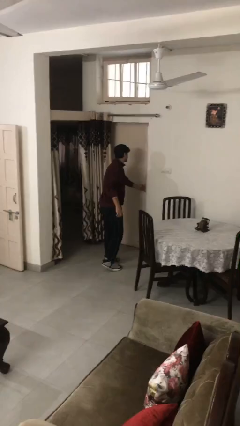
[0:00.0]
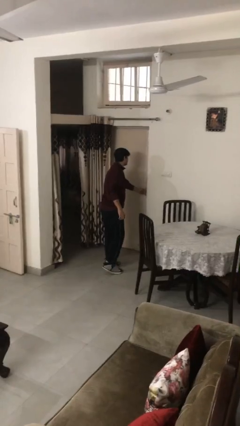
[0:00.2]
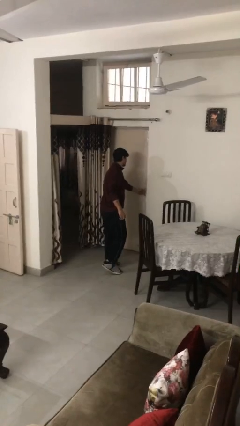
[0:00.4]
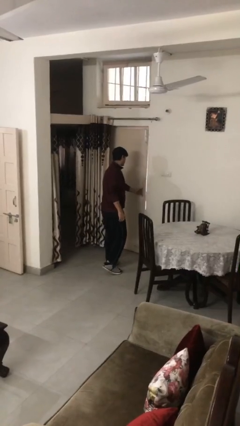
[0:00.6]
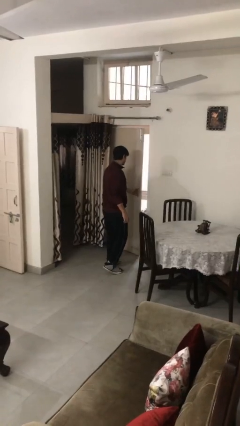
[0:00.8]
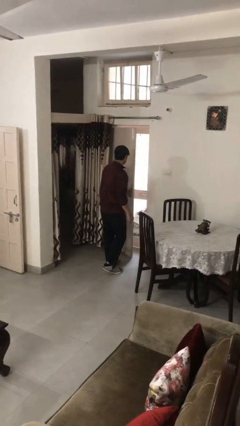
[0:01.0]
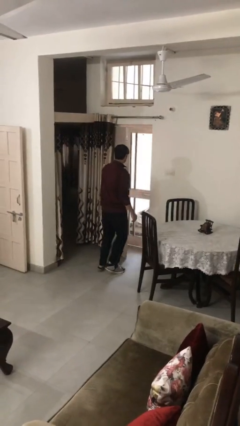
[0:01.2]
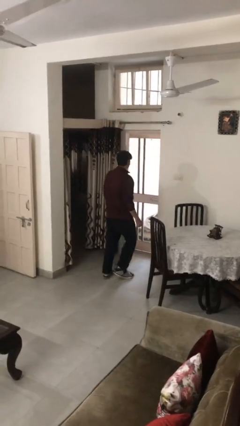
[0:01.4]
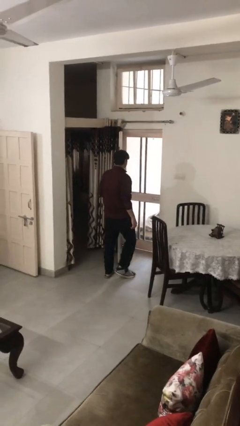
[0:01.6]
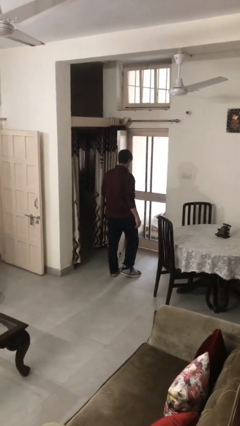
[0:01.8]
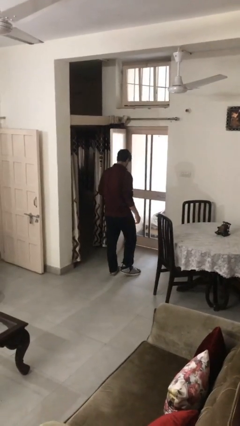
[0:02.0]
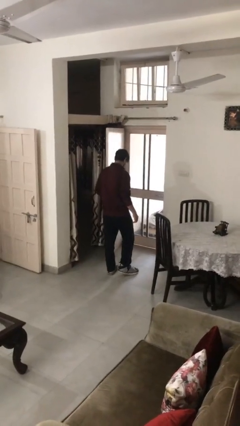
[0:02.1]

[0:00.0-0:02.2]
person opens facility door

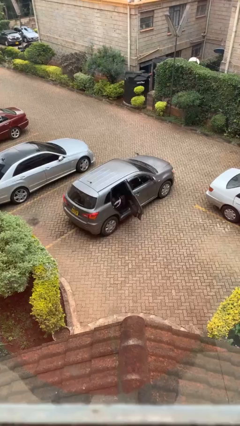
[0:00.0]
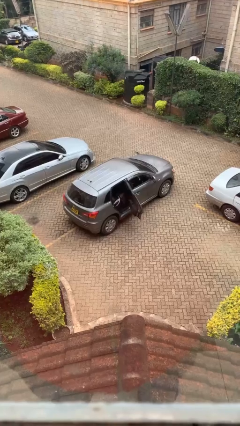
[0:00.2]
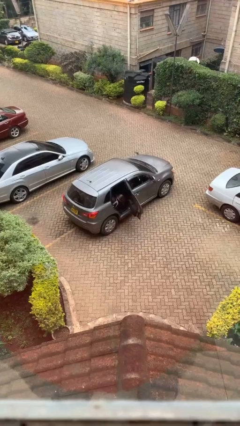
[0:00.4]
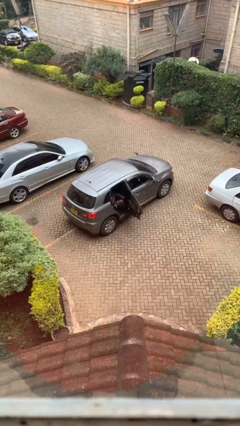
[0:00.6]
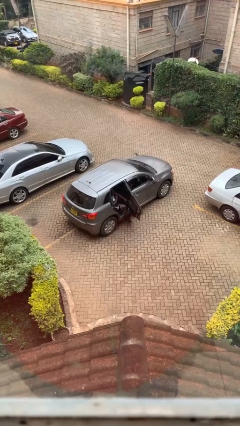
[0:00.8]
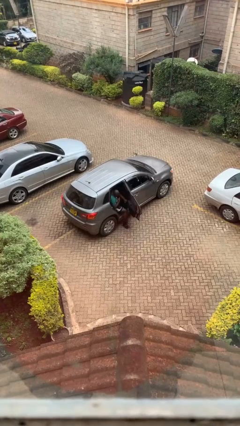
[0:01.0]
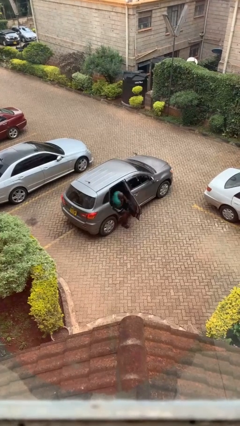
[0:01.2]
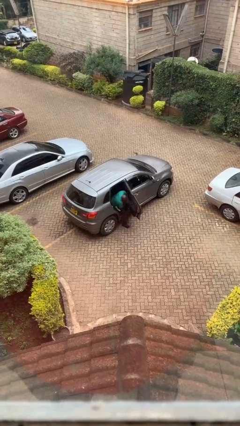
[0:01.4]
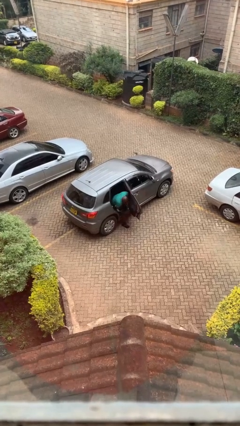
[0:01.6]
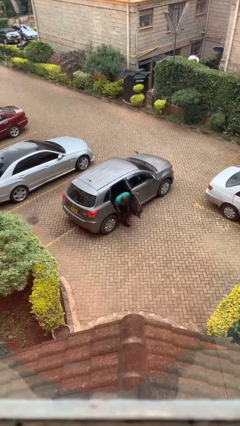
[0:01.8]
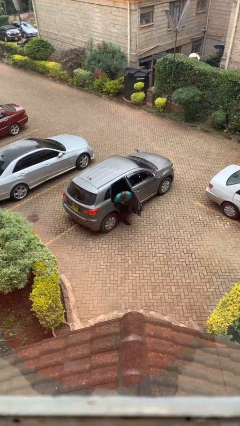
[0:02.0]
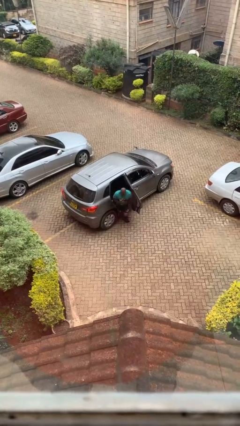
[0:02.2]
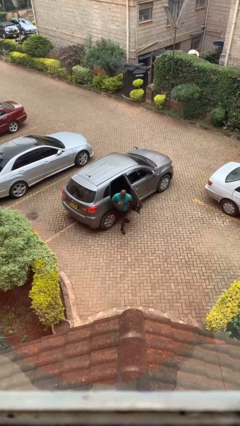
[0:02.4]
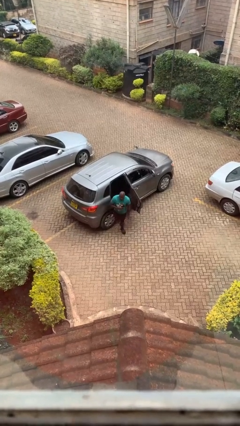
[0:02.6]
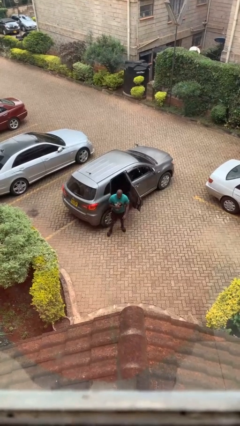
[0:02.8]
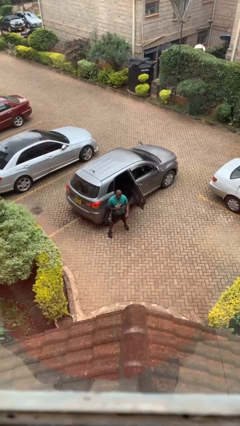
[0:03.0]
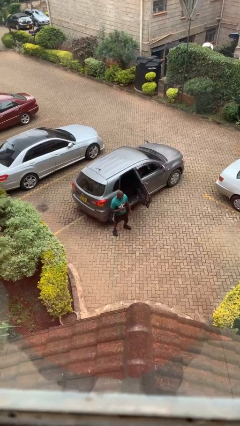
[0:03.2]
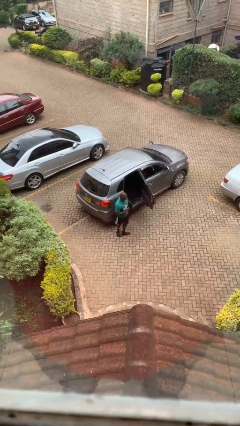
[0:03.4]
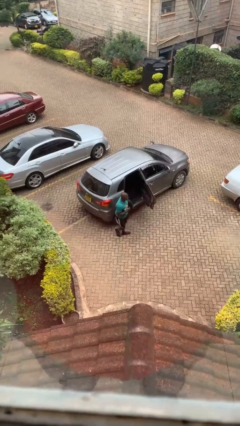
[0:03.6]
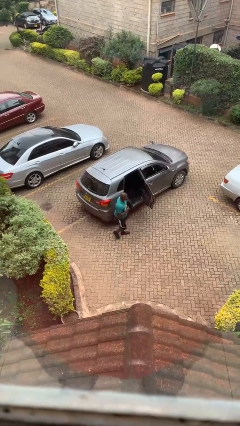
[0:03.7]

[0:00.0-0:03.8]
person exits car

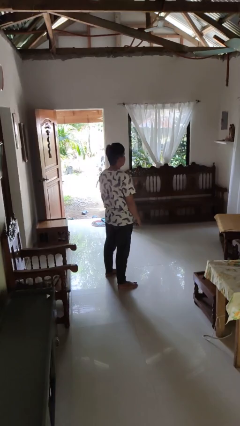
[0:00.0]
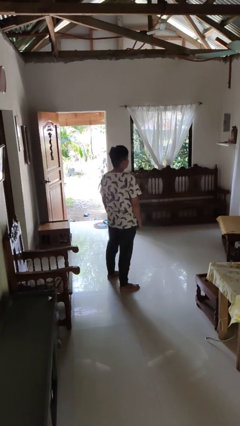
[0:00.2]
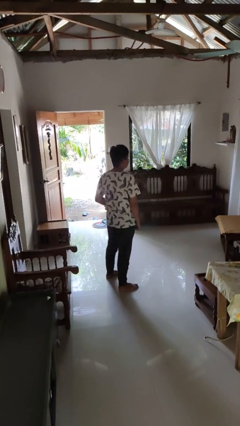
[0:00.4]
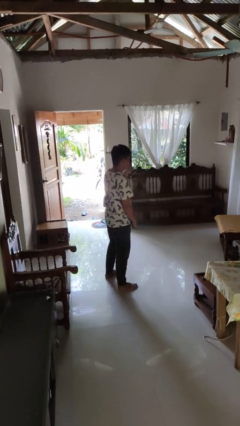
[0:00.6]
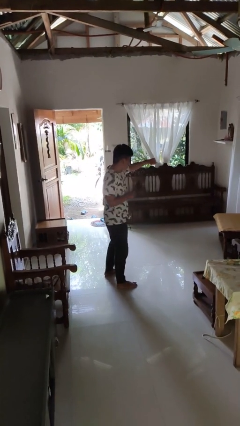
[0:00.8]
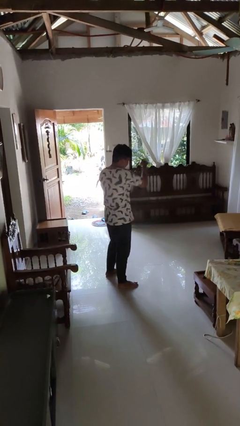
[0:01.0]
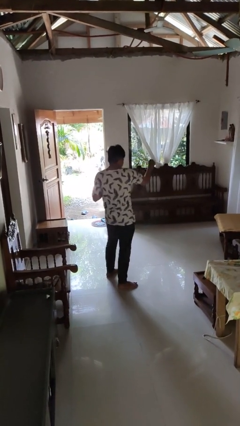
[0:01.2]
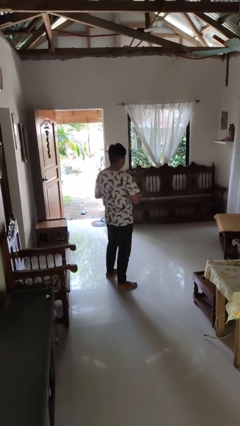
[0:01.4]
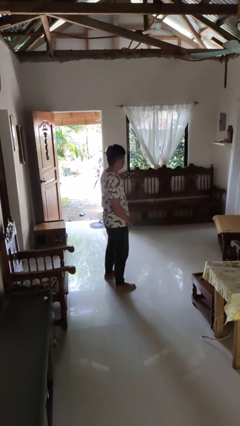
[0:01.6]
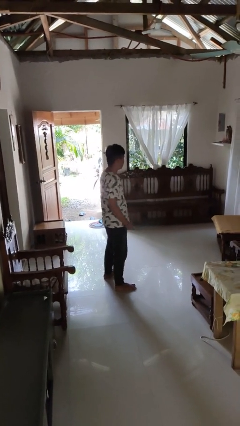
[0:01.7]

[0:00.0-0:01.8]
person punches

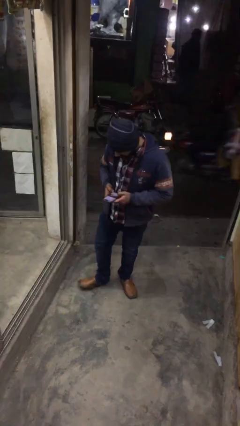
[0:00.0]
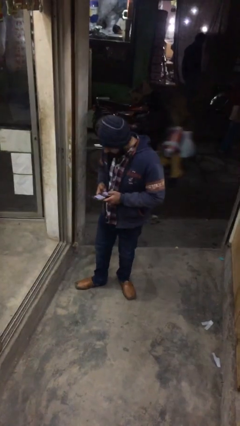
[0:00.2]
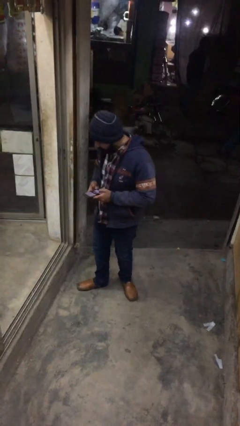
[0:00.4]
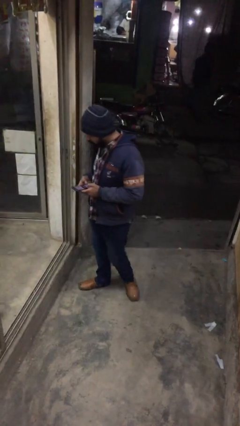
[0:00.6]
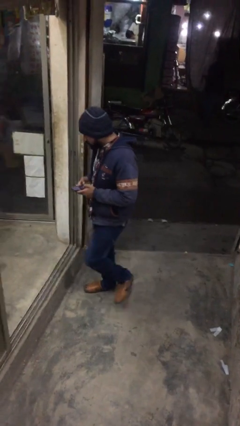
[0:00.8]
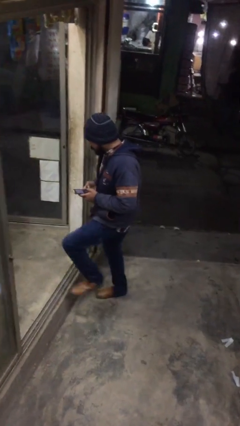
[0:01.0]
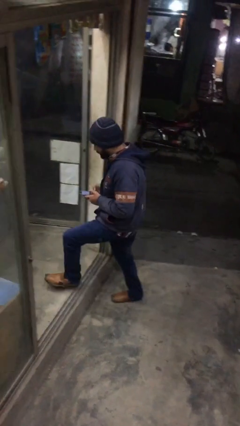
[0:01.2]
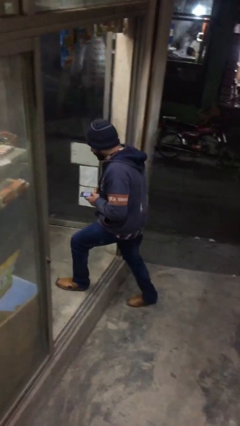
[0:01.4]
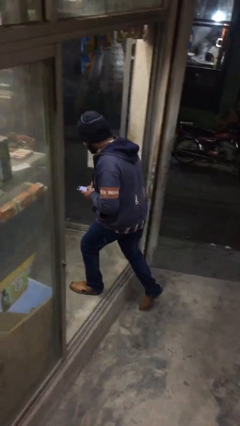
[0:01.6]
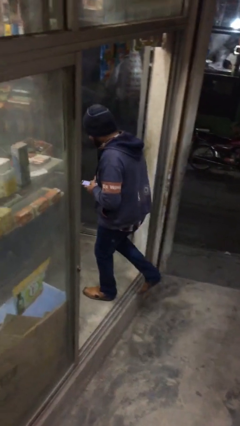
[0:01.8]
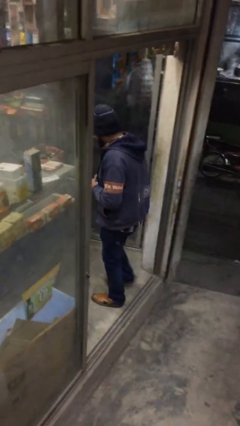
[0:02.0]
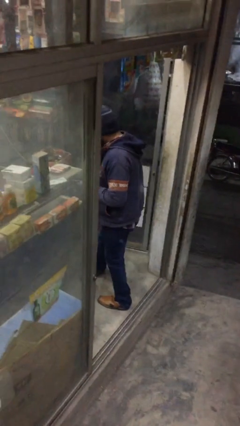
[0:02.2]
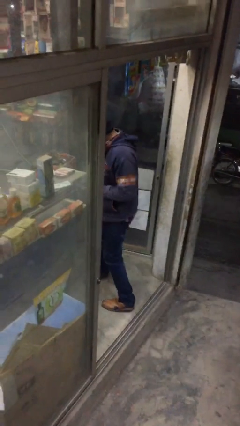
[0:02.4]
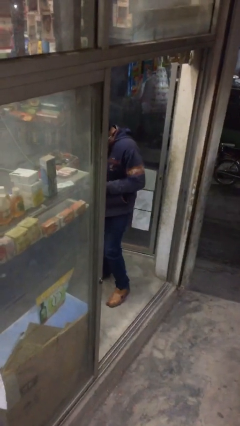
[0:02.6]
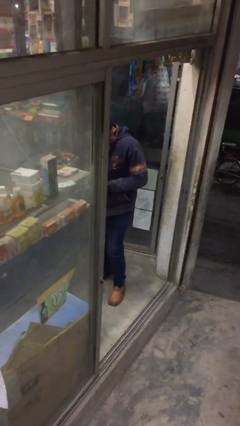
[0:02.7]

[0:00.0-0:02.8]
person enters scene through structure

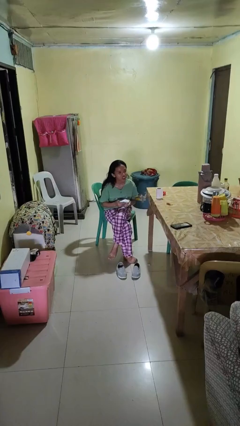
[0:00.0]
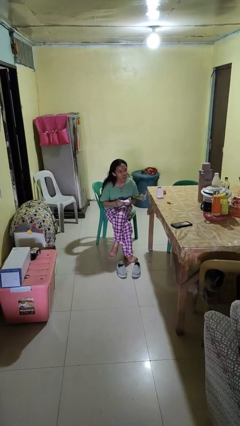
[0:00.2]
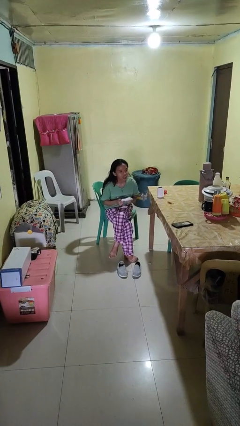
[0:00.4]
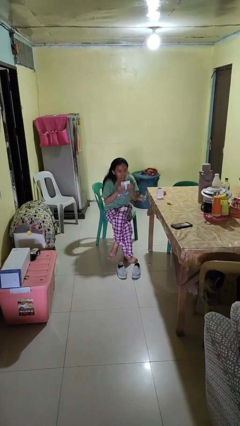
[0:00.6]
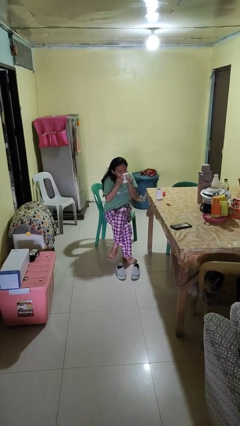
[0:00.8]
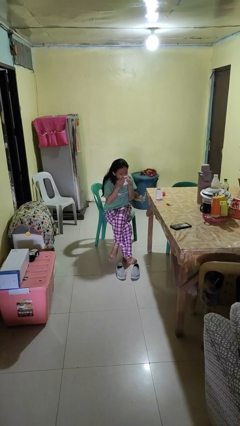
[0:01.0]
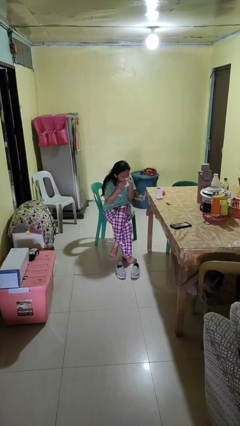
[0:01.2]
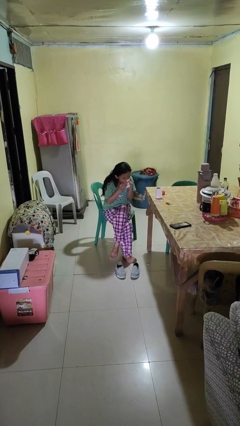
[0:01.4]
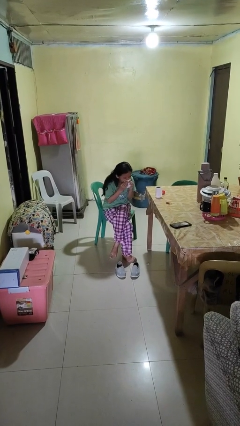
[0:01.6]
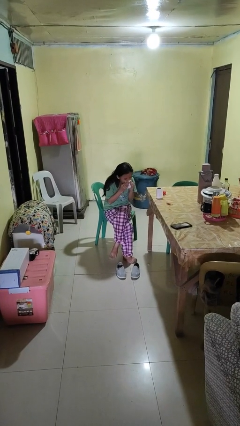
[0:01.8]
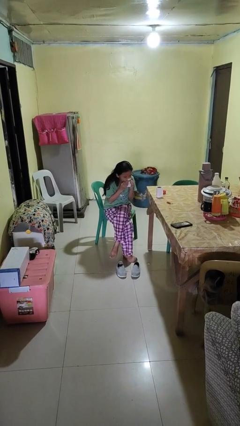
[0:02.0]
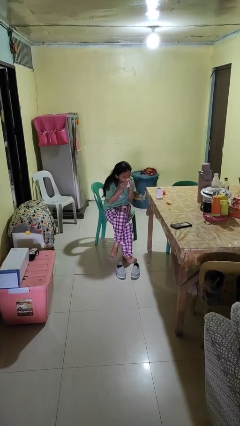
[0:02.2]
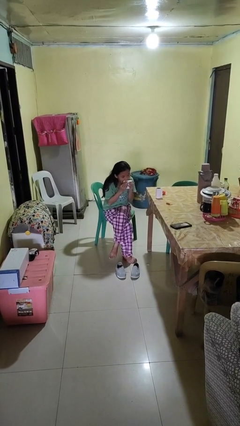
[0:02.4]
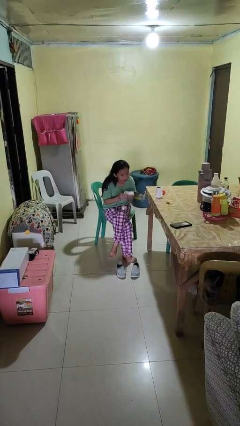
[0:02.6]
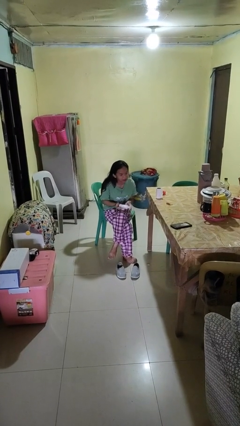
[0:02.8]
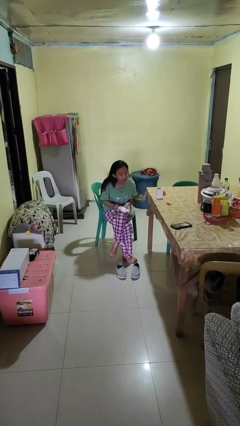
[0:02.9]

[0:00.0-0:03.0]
person blows nose

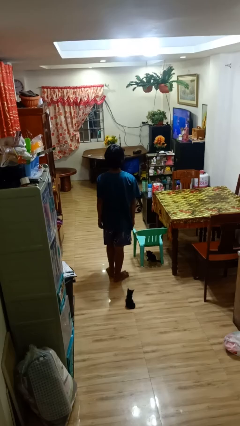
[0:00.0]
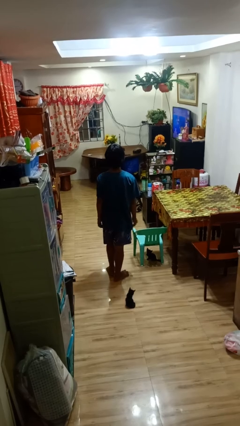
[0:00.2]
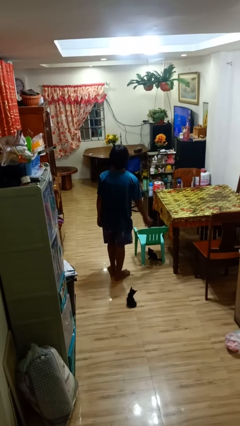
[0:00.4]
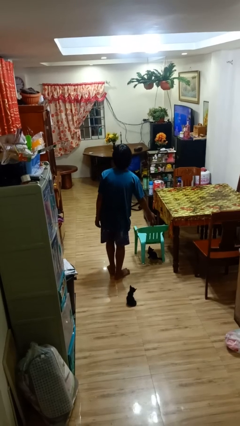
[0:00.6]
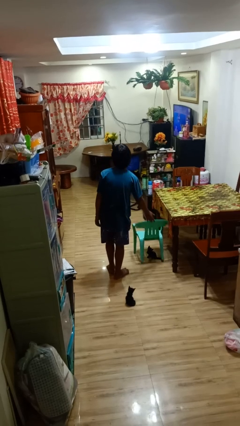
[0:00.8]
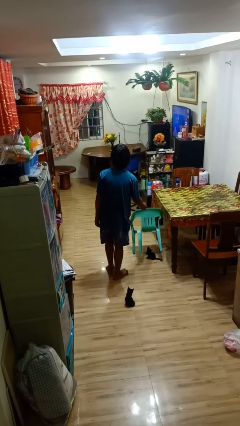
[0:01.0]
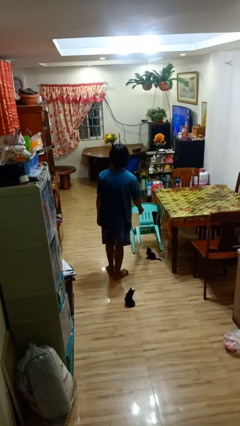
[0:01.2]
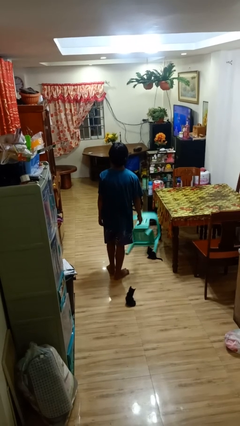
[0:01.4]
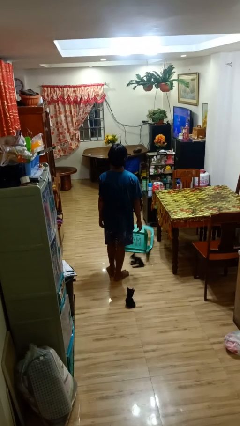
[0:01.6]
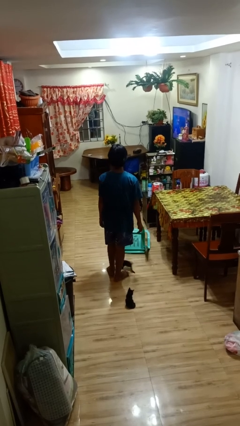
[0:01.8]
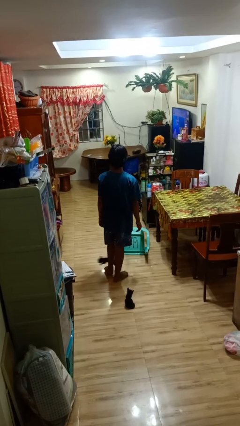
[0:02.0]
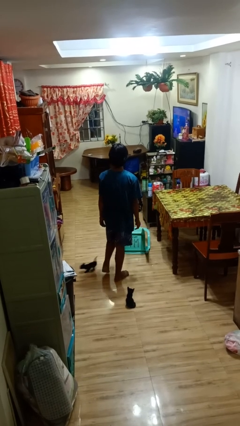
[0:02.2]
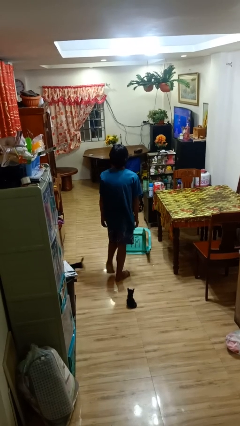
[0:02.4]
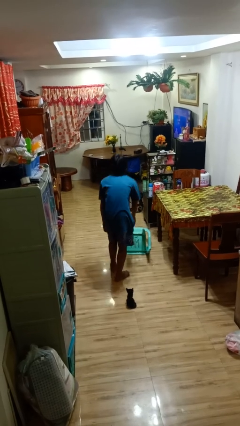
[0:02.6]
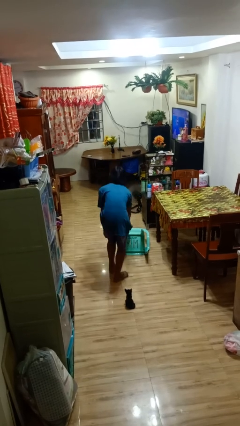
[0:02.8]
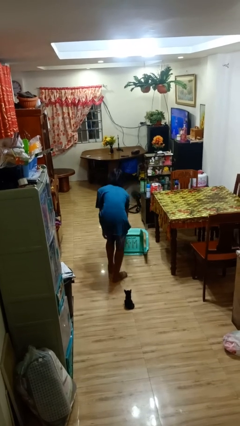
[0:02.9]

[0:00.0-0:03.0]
person knocks over furniture

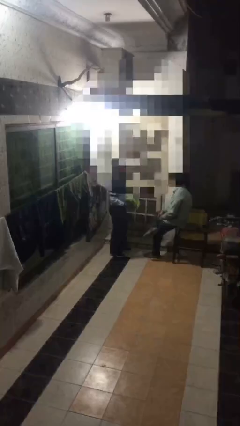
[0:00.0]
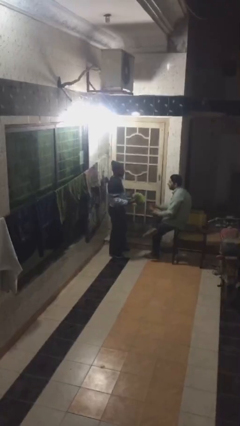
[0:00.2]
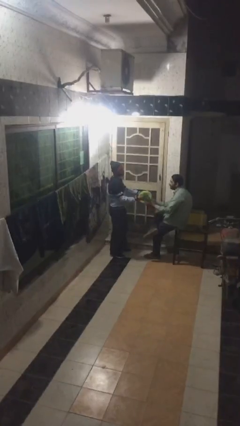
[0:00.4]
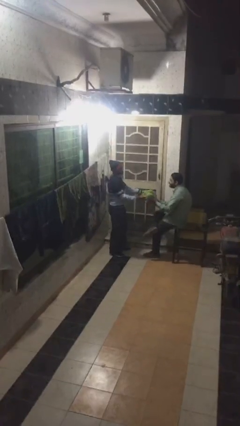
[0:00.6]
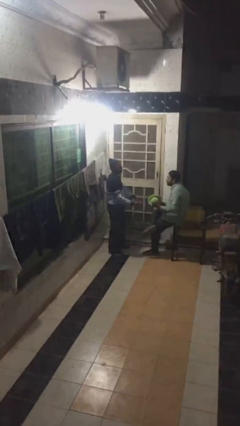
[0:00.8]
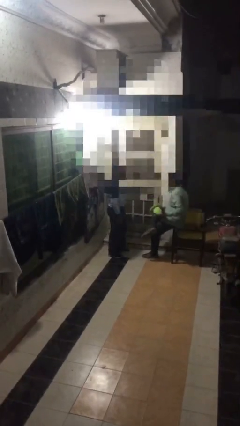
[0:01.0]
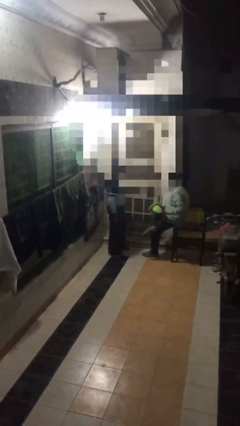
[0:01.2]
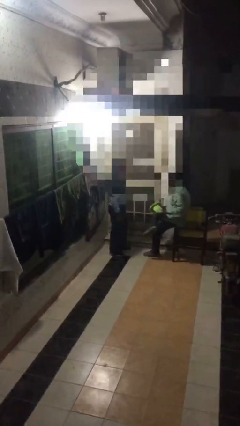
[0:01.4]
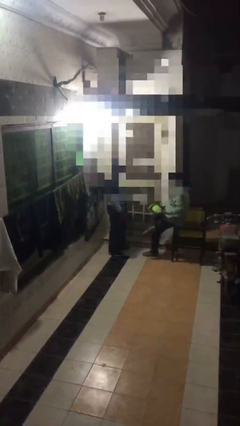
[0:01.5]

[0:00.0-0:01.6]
person transfers object to person
